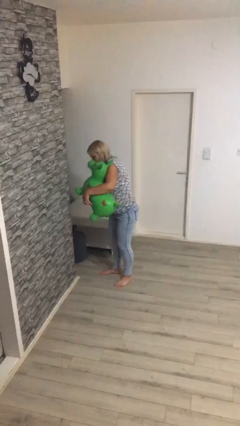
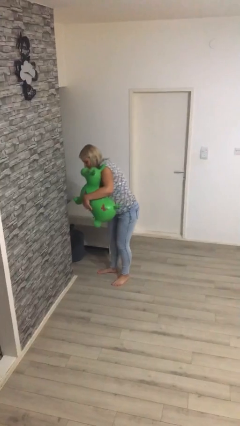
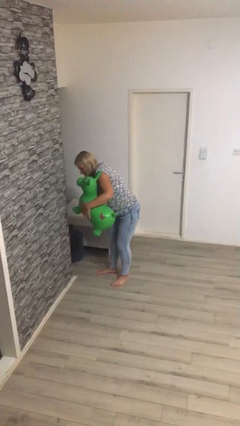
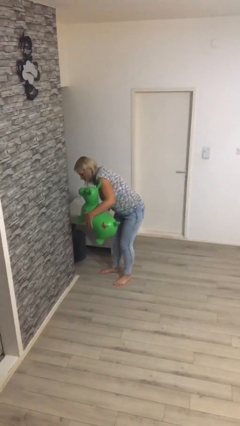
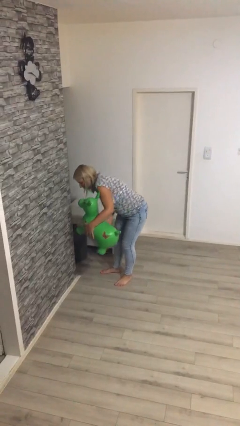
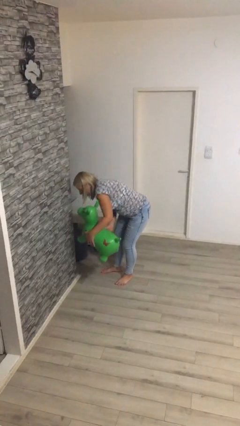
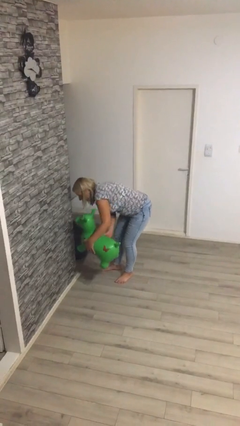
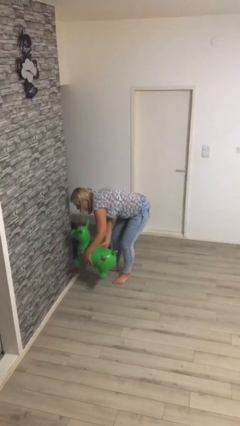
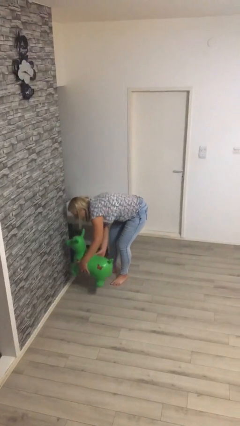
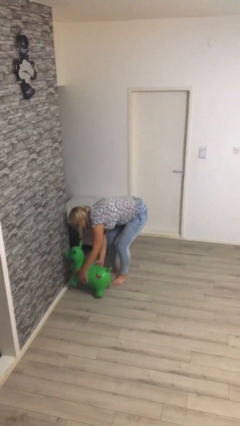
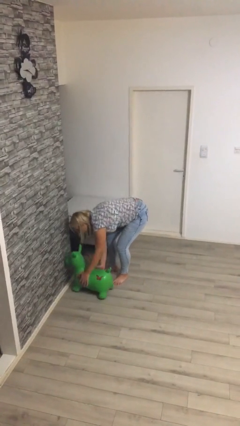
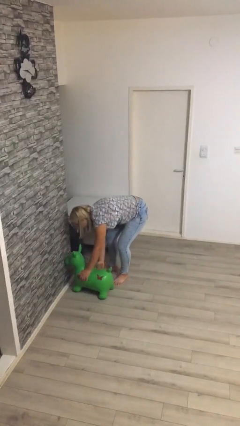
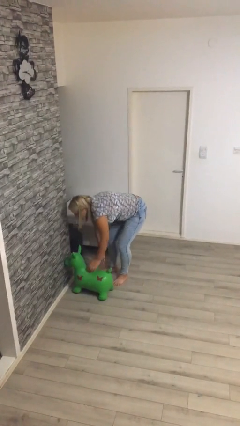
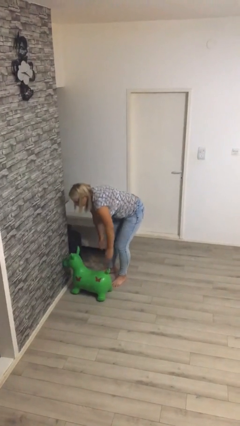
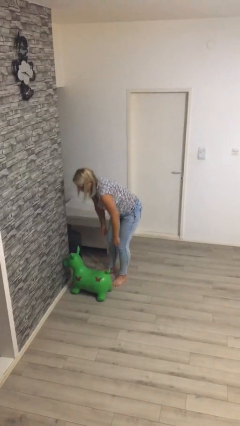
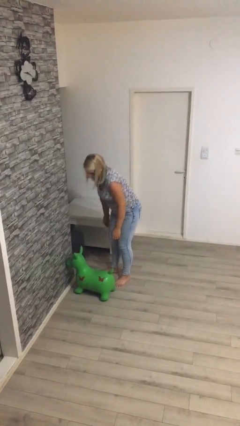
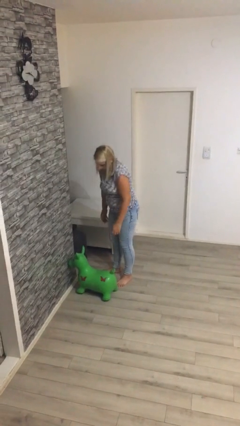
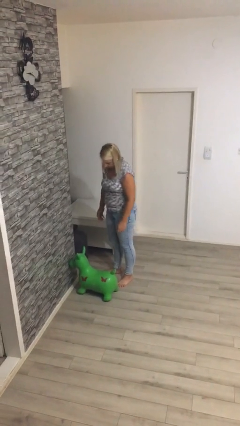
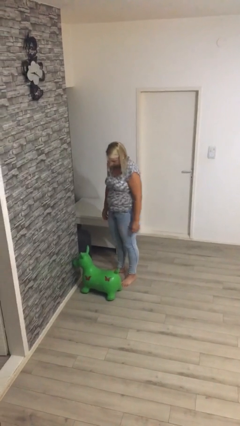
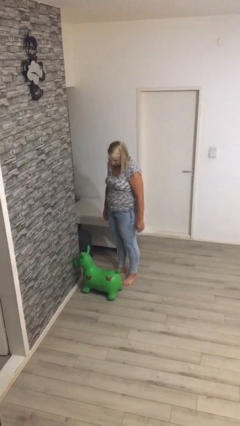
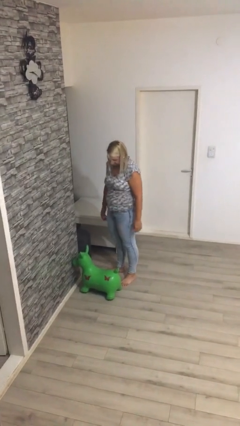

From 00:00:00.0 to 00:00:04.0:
person puts down object on floor

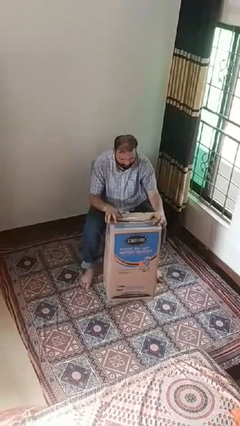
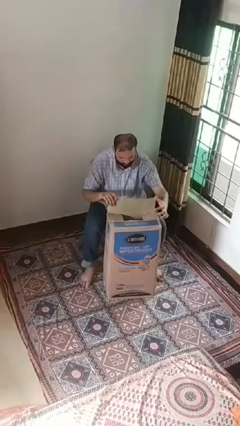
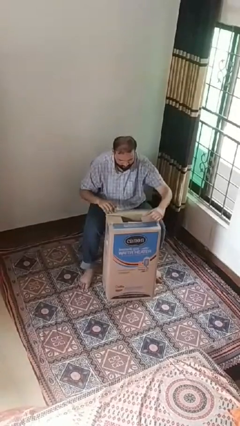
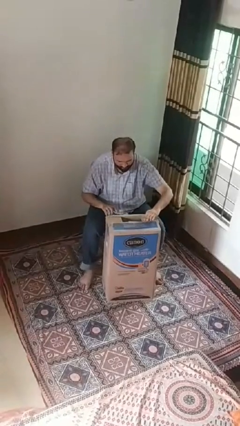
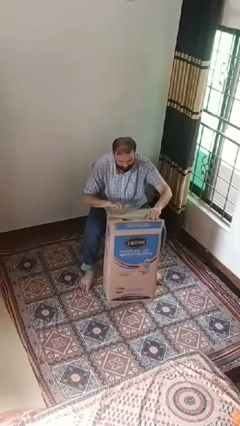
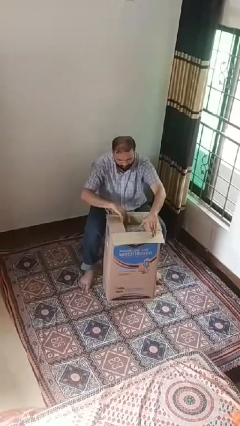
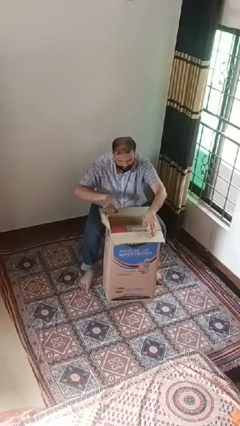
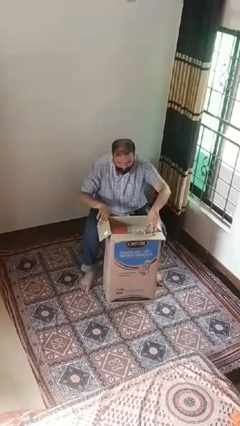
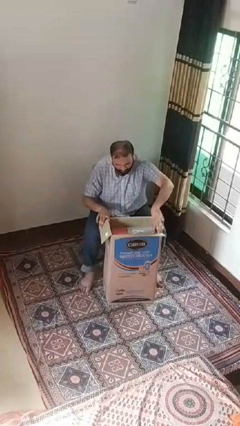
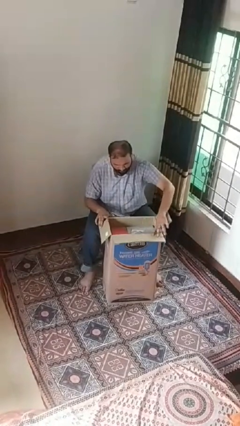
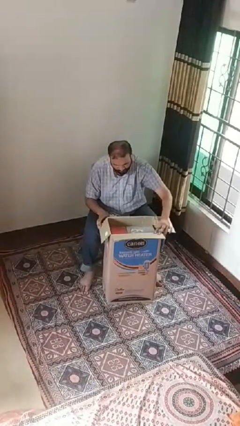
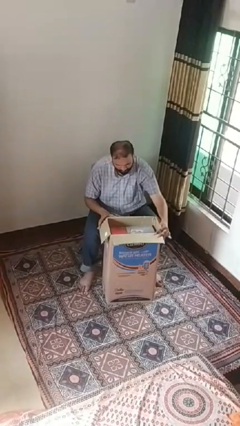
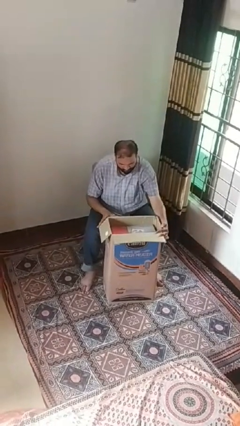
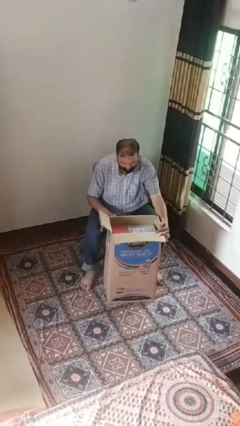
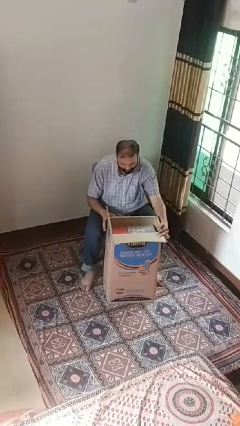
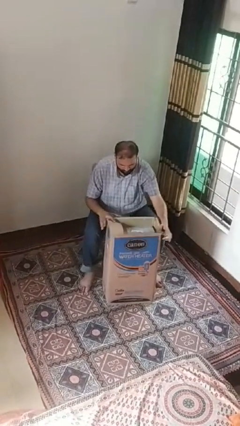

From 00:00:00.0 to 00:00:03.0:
person opens box

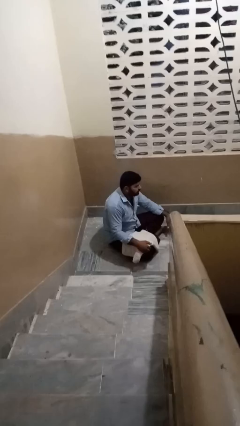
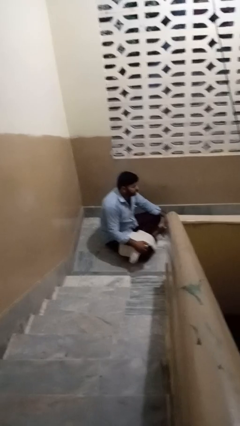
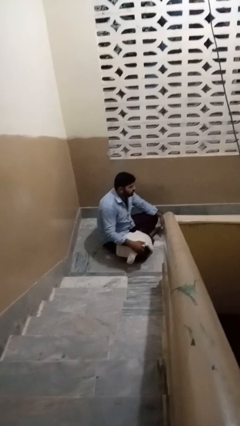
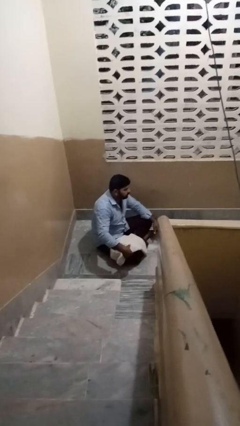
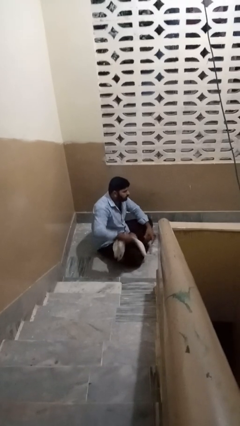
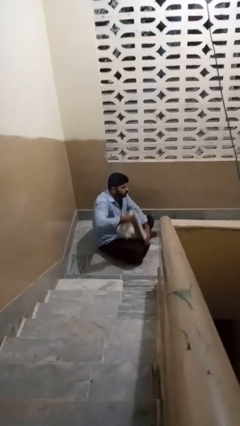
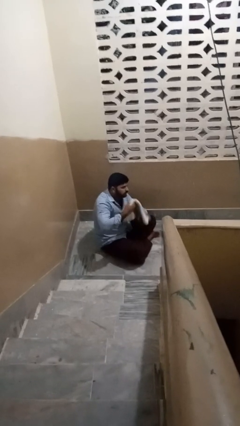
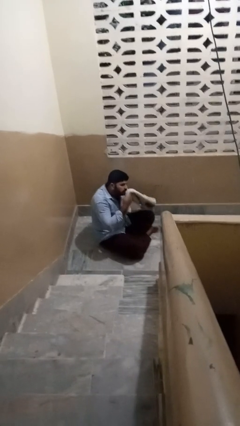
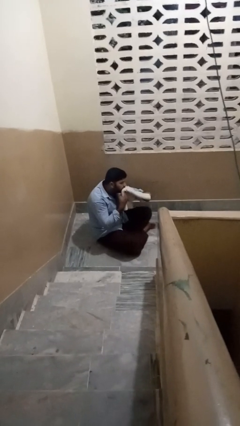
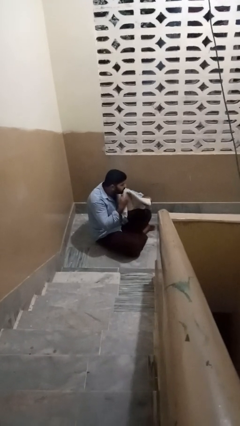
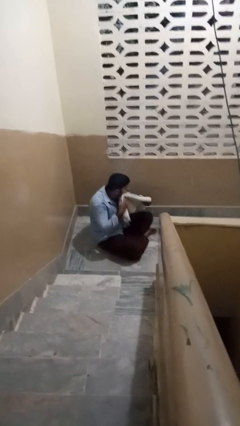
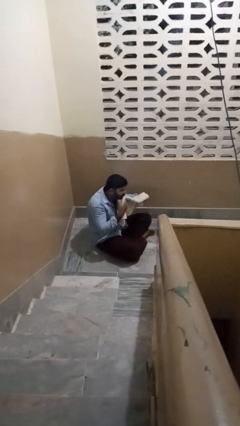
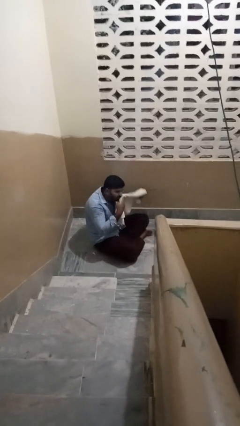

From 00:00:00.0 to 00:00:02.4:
person wipes mouth with napkin

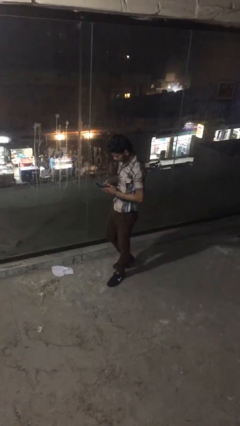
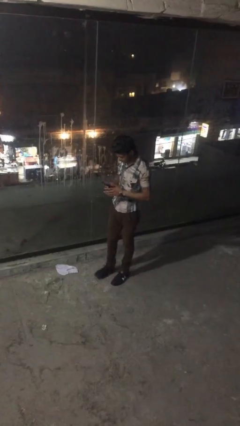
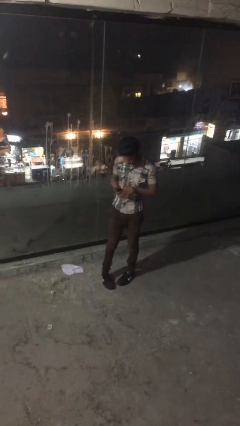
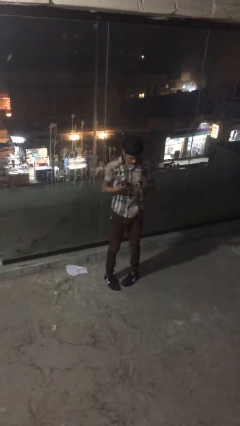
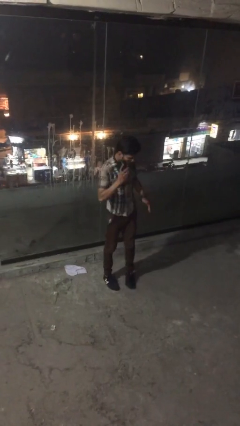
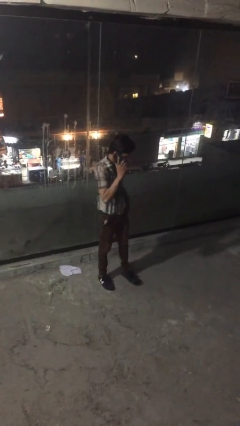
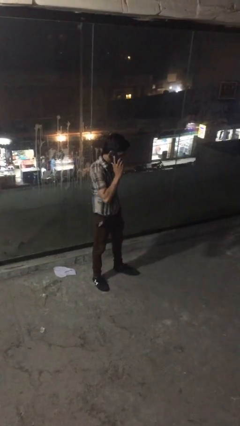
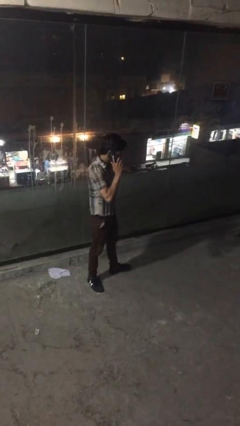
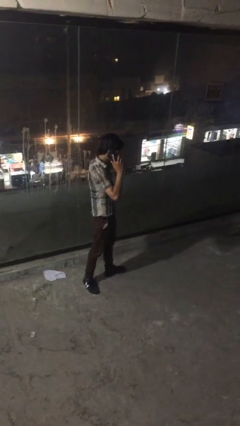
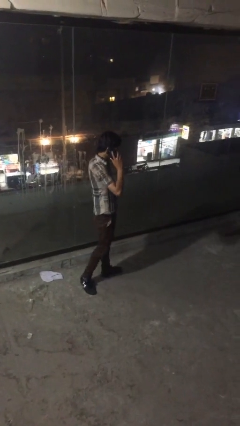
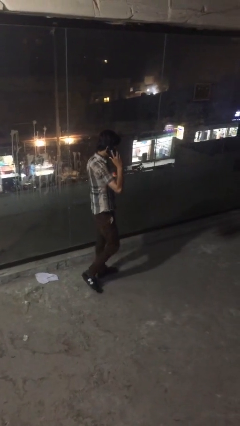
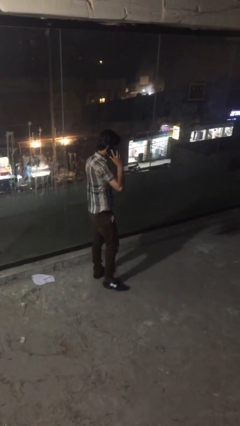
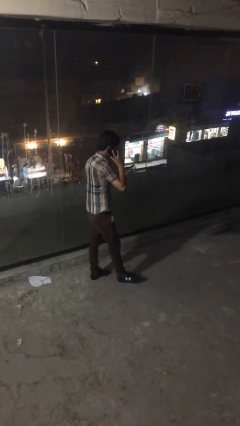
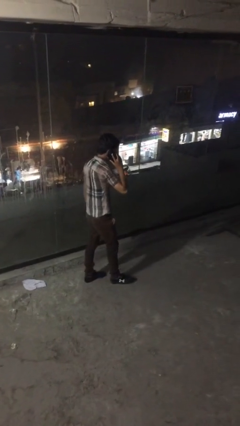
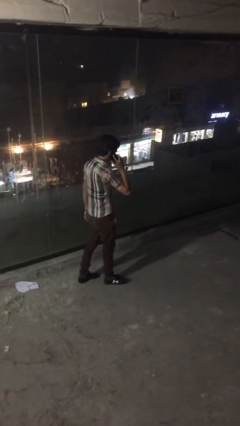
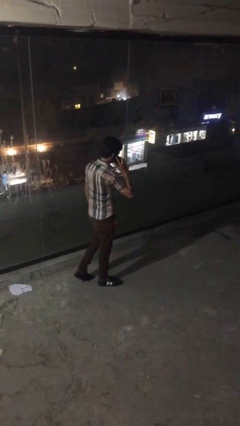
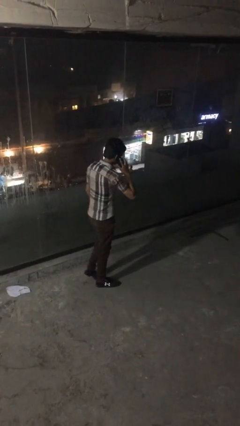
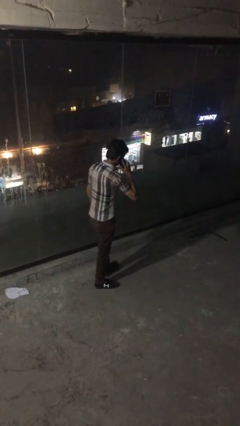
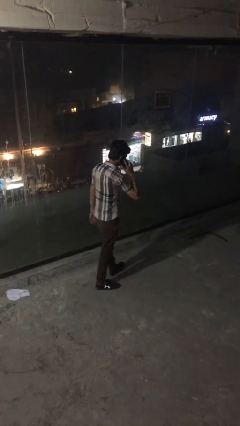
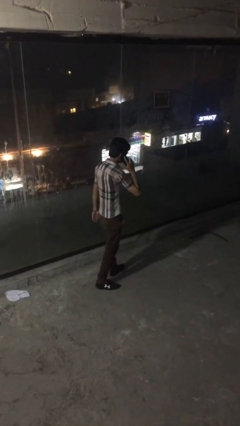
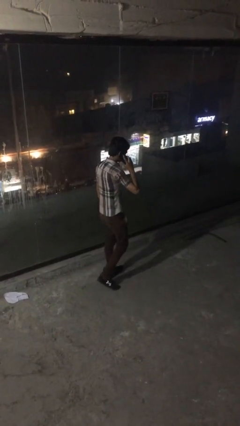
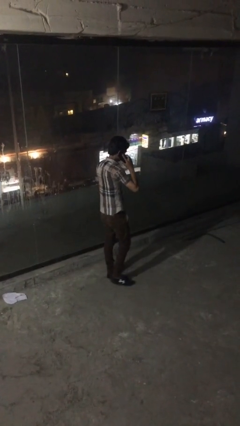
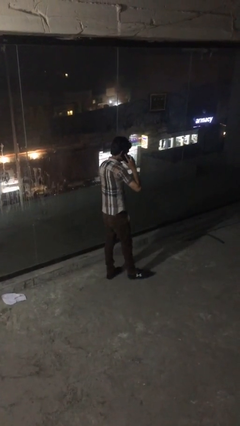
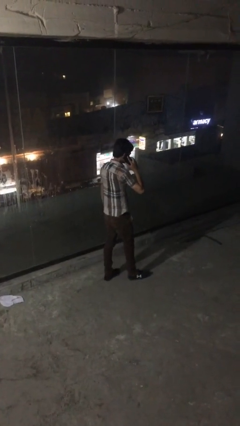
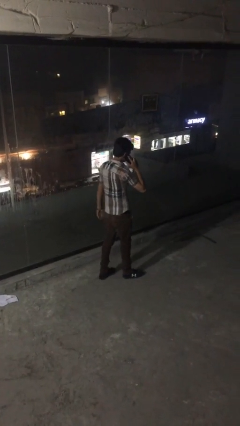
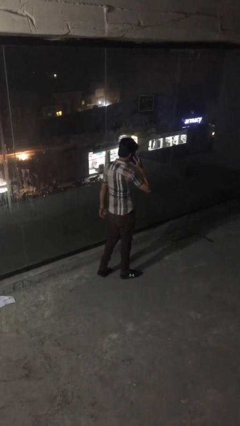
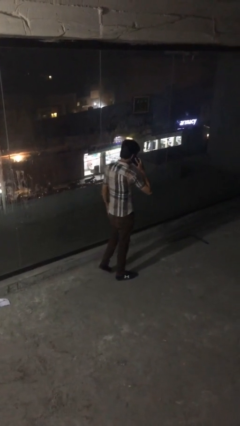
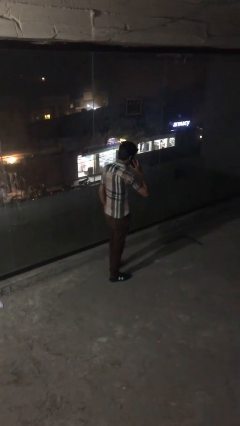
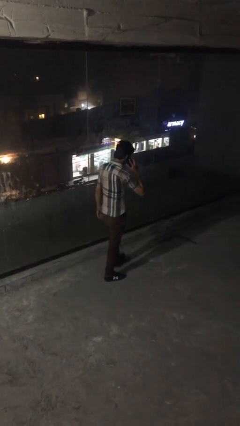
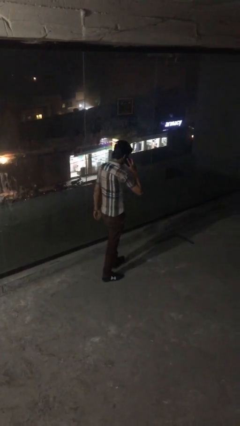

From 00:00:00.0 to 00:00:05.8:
person talks on phone

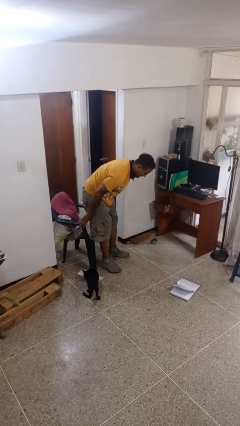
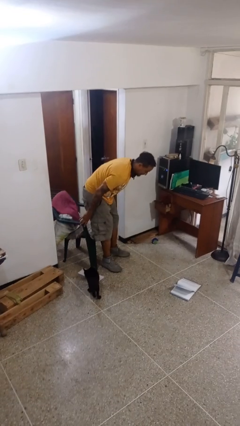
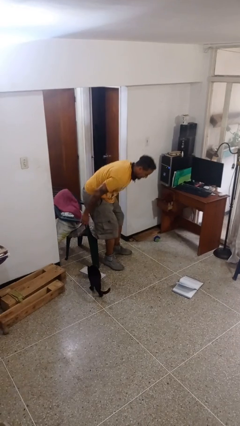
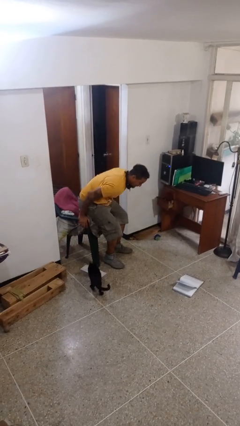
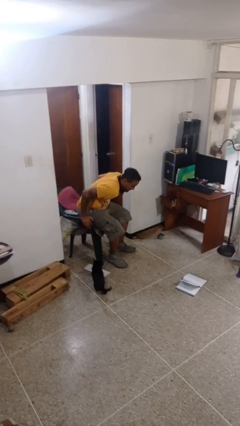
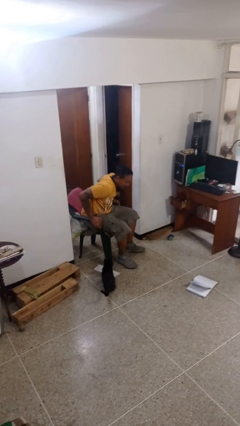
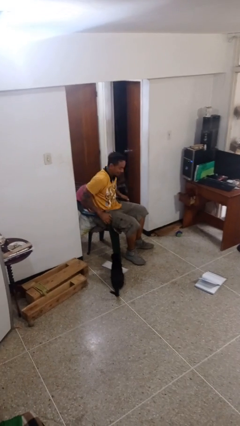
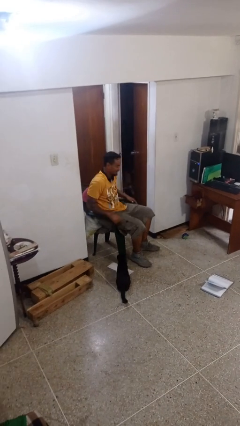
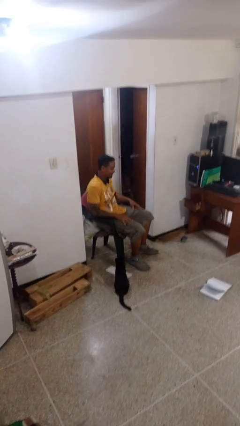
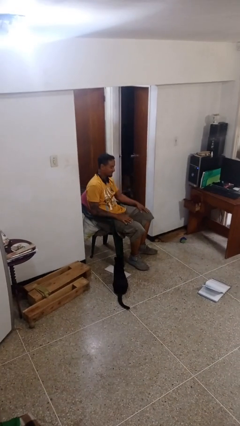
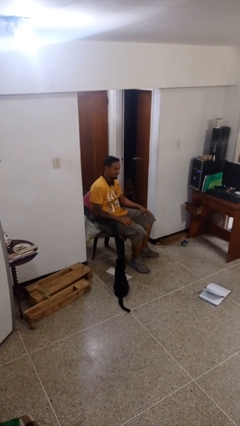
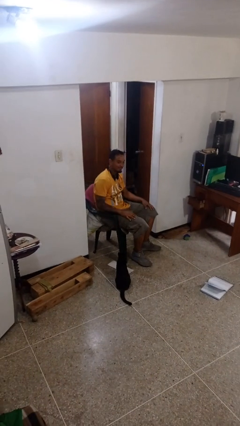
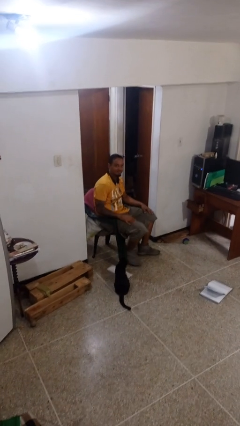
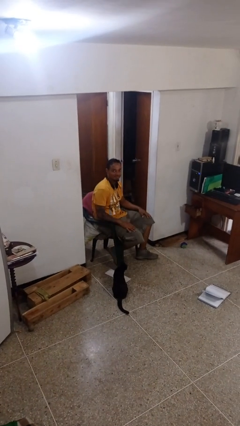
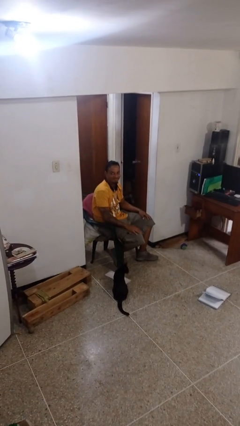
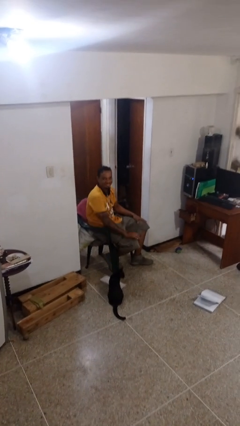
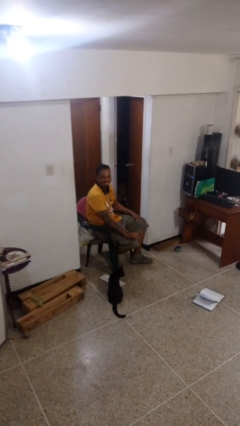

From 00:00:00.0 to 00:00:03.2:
person sits down
